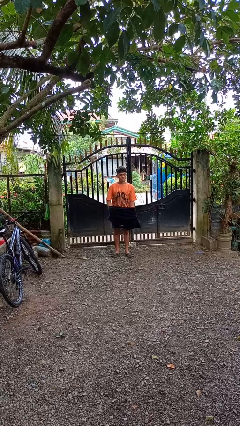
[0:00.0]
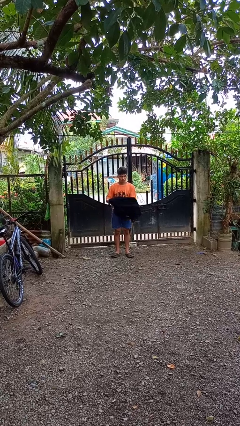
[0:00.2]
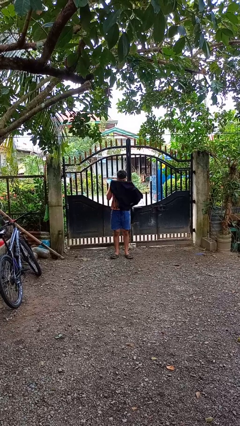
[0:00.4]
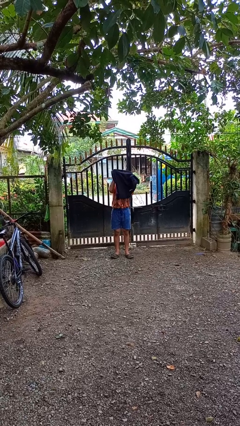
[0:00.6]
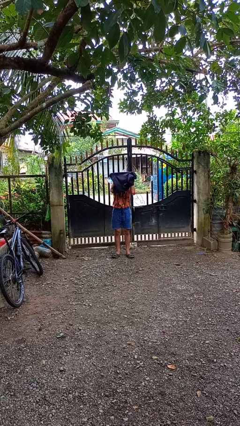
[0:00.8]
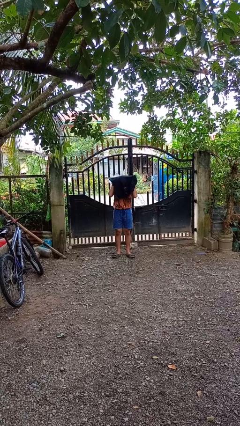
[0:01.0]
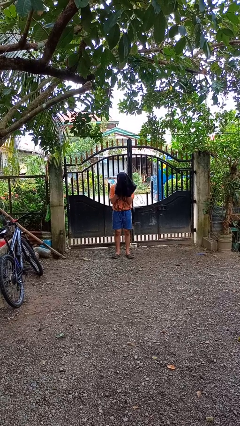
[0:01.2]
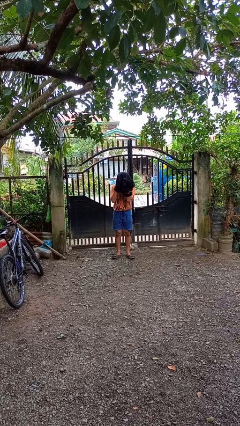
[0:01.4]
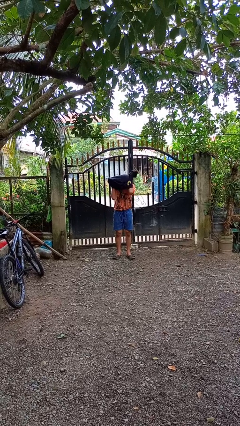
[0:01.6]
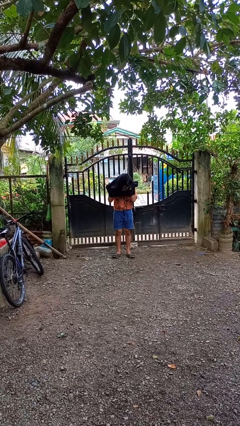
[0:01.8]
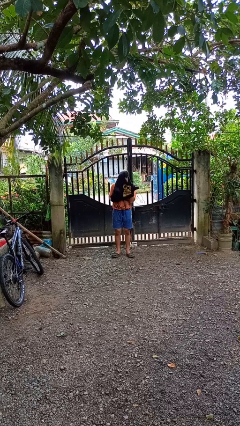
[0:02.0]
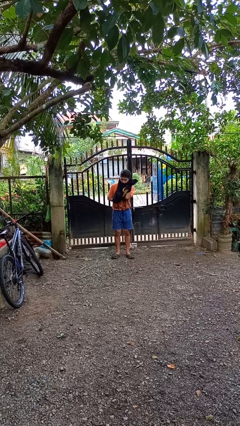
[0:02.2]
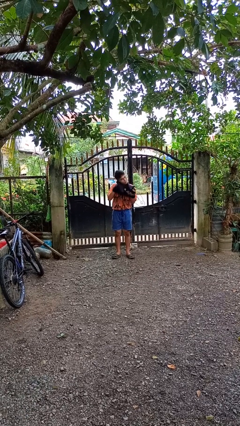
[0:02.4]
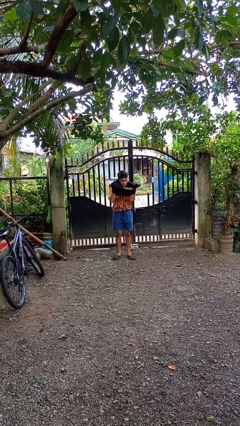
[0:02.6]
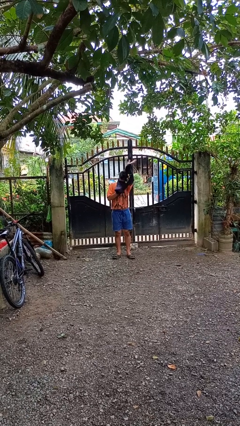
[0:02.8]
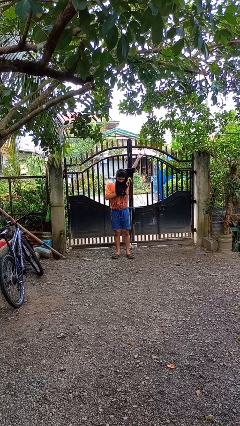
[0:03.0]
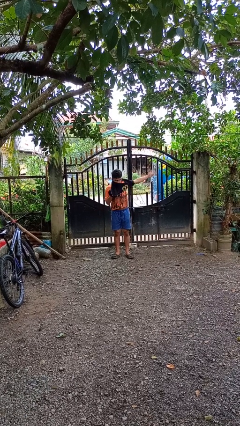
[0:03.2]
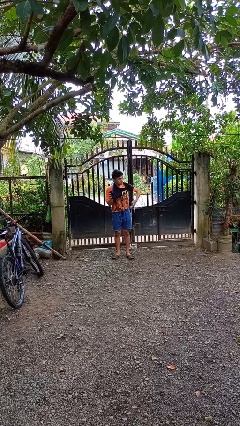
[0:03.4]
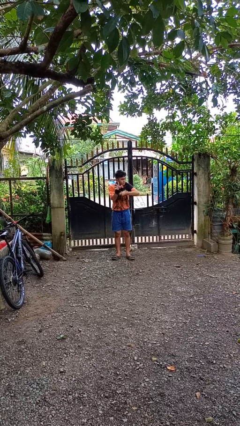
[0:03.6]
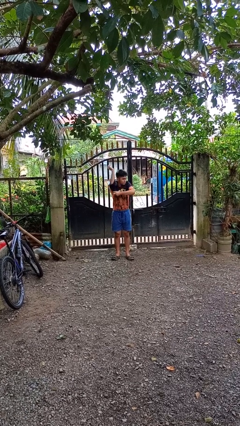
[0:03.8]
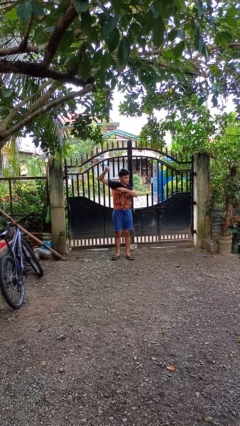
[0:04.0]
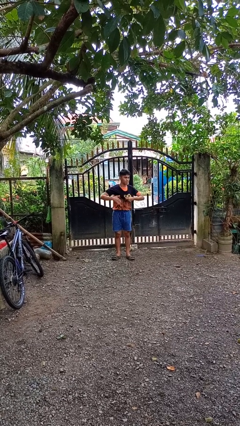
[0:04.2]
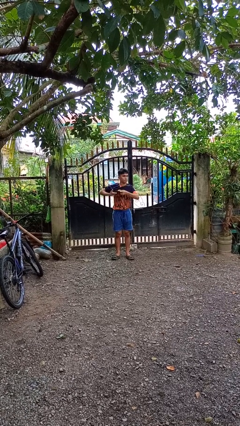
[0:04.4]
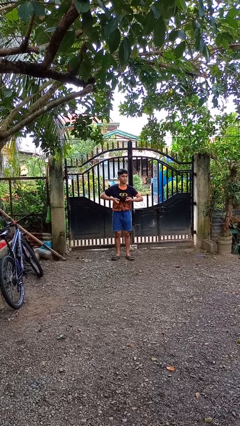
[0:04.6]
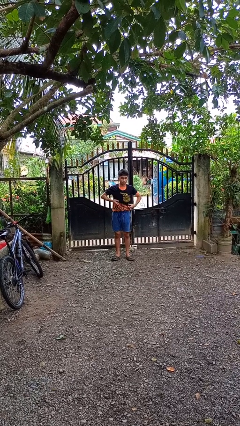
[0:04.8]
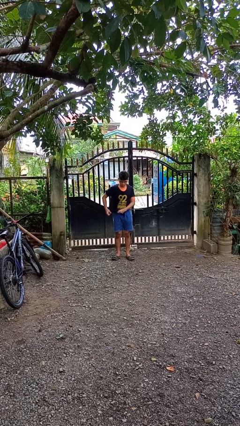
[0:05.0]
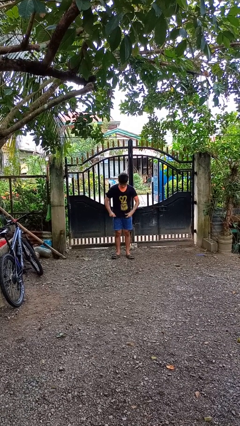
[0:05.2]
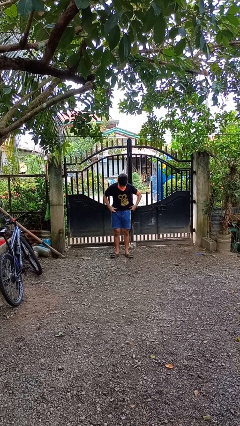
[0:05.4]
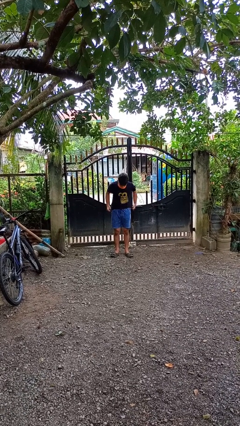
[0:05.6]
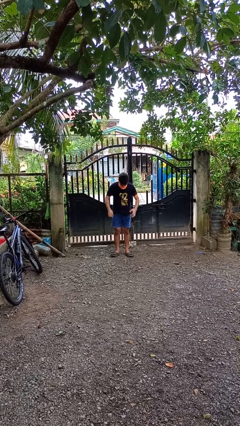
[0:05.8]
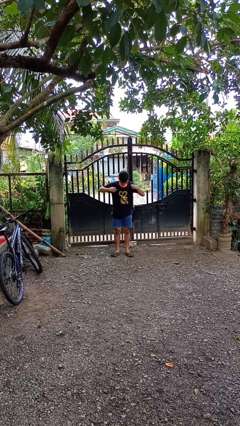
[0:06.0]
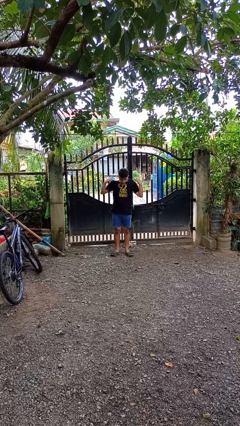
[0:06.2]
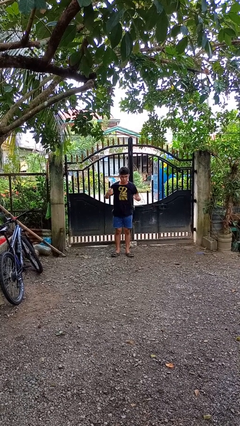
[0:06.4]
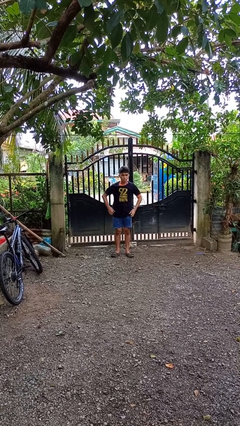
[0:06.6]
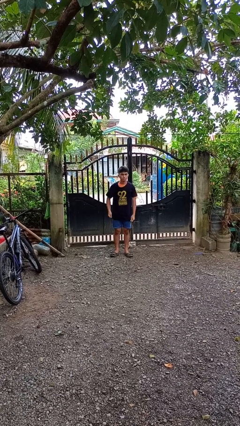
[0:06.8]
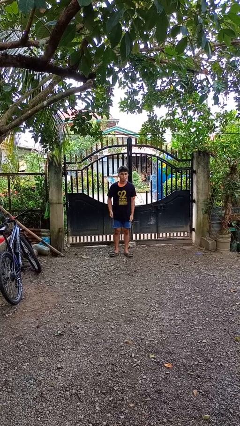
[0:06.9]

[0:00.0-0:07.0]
person puts on shirt

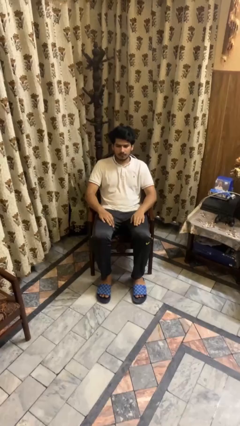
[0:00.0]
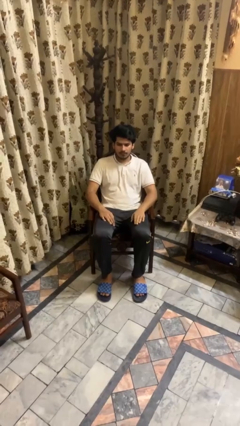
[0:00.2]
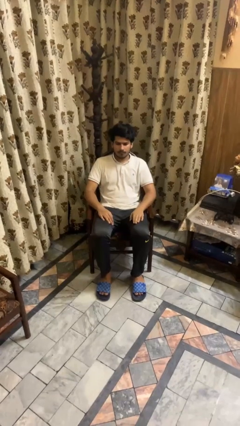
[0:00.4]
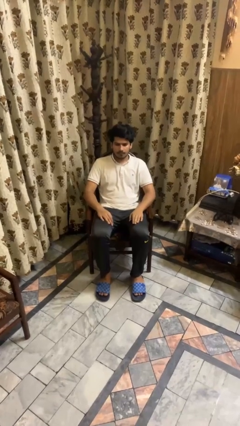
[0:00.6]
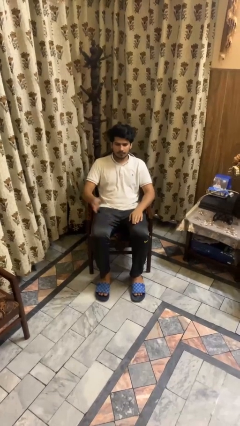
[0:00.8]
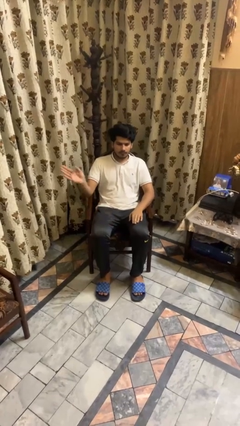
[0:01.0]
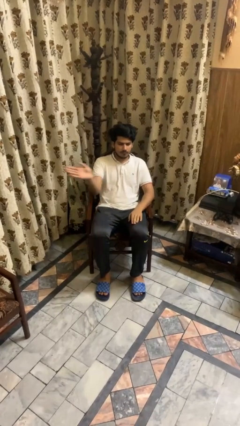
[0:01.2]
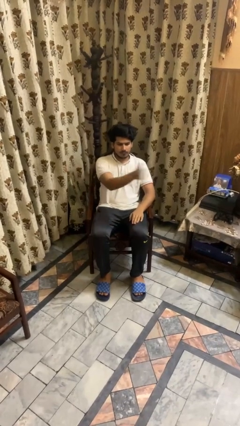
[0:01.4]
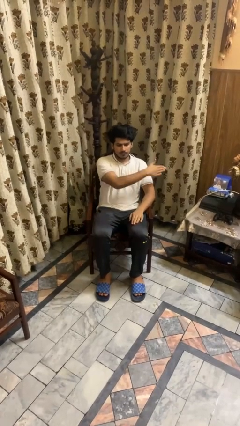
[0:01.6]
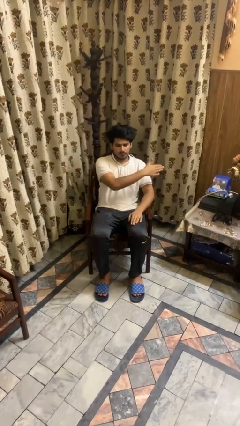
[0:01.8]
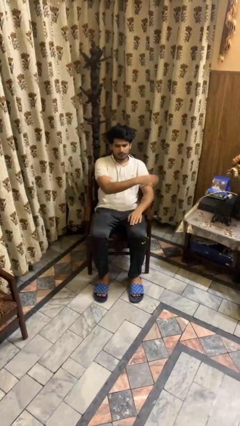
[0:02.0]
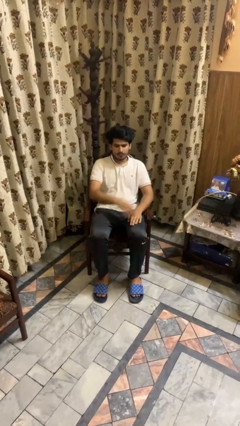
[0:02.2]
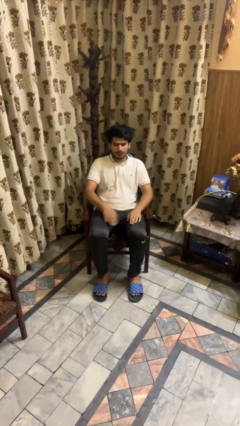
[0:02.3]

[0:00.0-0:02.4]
person gestures swipe left

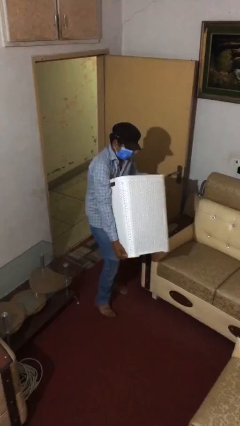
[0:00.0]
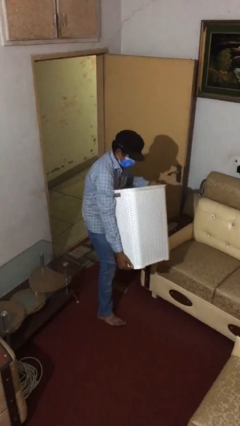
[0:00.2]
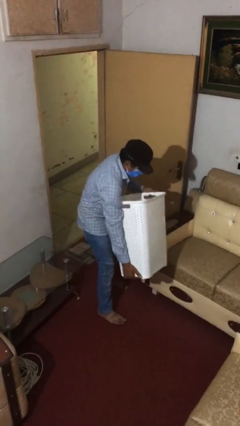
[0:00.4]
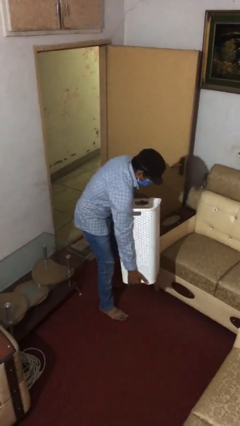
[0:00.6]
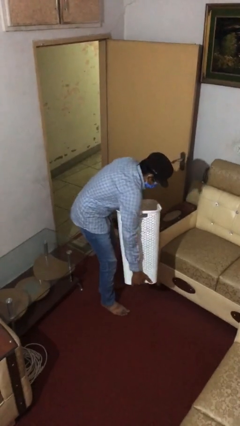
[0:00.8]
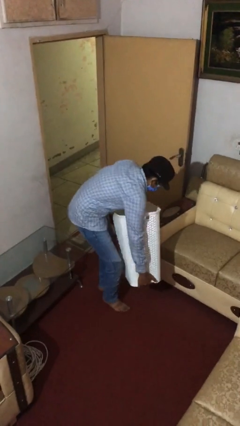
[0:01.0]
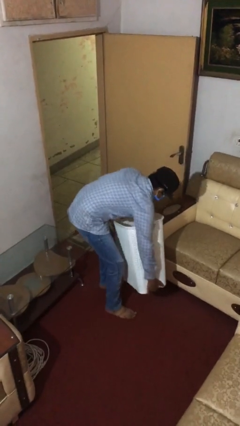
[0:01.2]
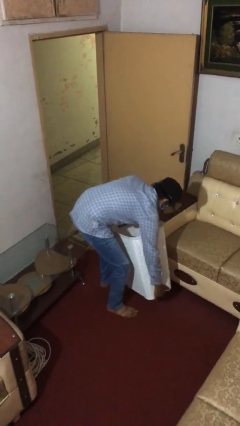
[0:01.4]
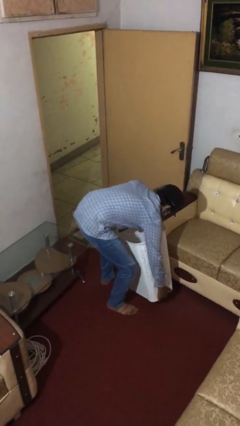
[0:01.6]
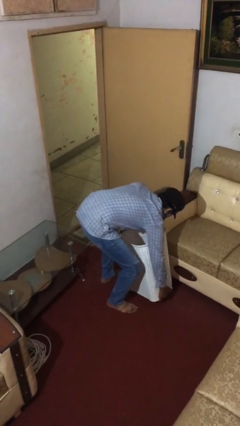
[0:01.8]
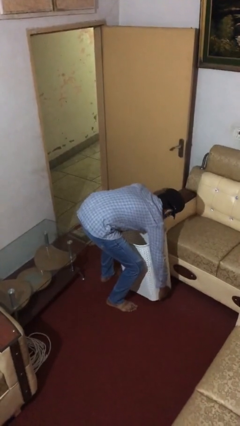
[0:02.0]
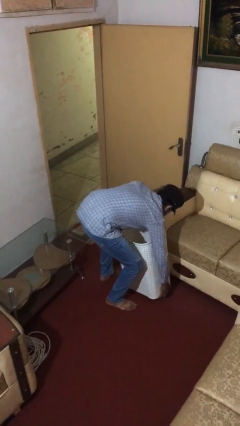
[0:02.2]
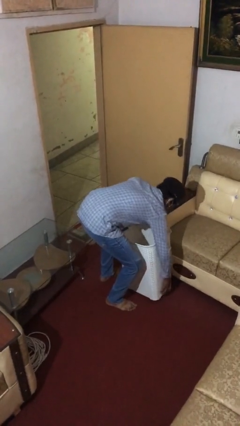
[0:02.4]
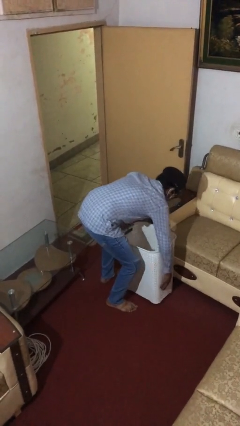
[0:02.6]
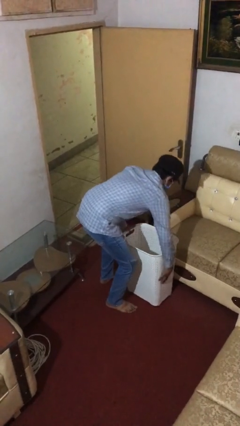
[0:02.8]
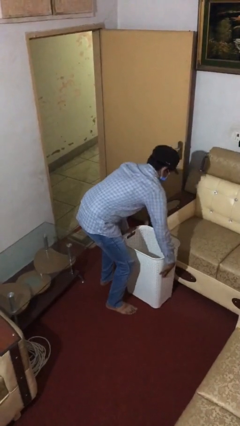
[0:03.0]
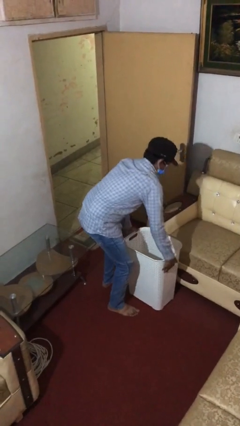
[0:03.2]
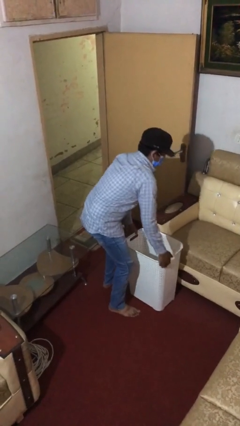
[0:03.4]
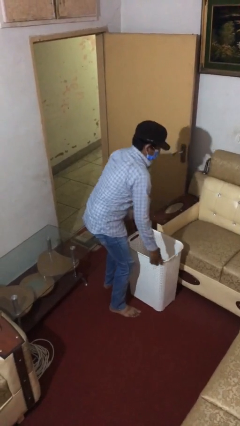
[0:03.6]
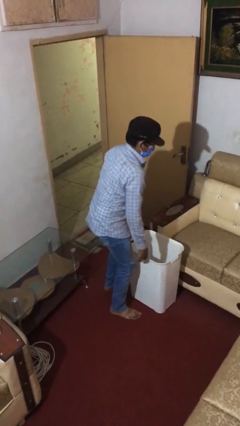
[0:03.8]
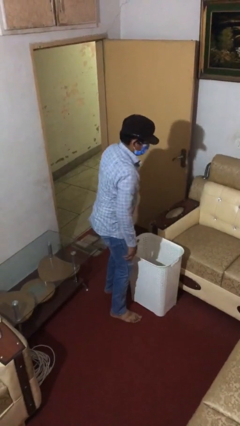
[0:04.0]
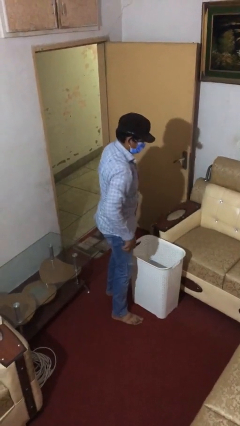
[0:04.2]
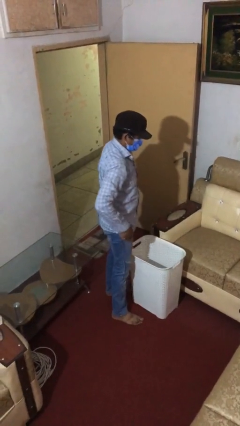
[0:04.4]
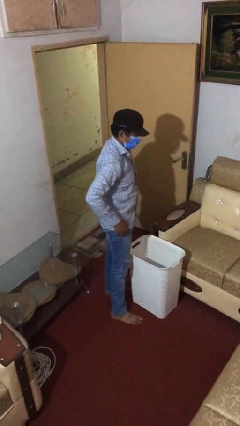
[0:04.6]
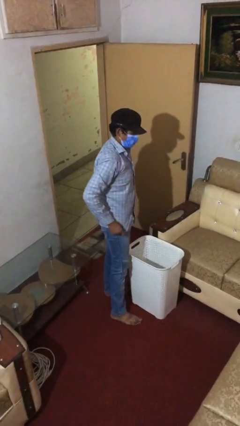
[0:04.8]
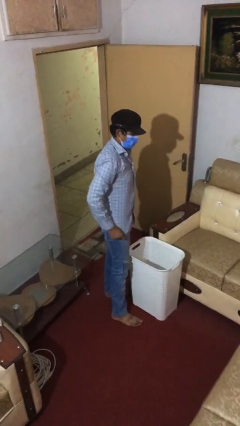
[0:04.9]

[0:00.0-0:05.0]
person puts down object on floor

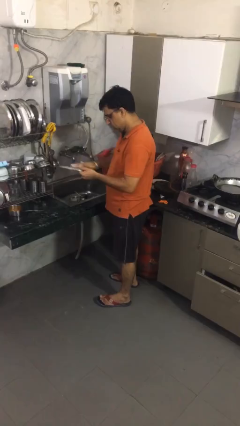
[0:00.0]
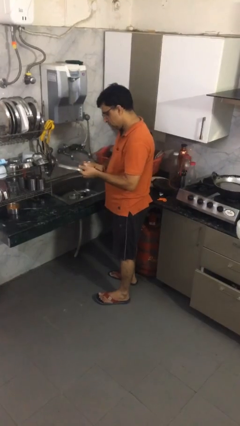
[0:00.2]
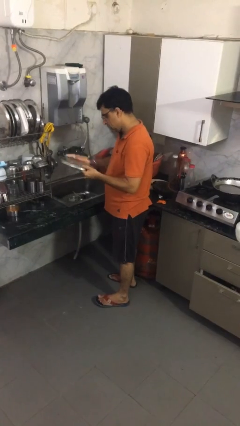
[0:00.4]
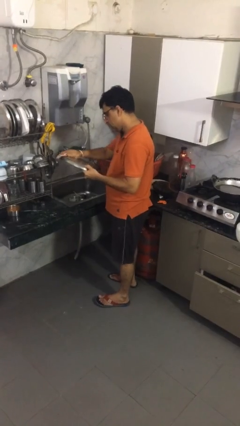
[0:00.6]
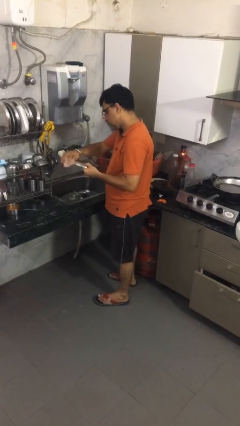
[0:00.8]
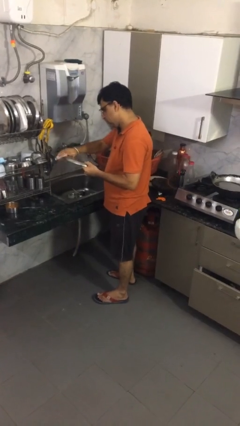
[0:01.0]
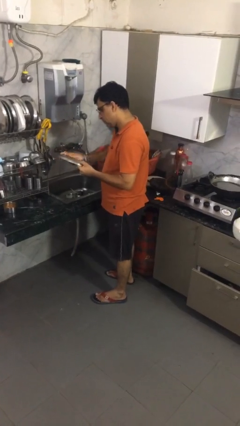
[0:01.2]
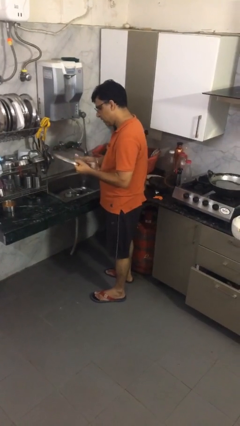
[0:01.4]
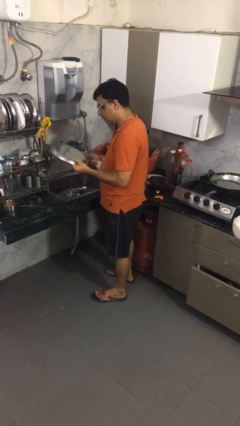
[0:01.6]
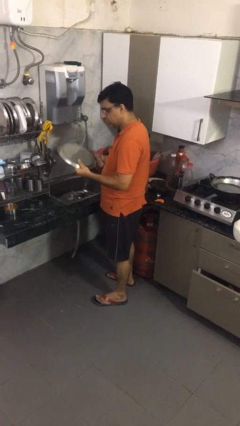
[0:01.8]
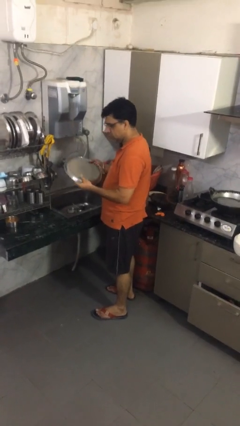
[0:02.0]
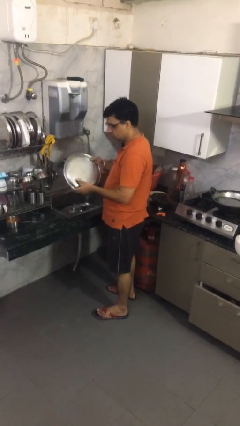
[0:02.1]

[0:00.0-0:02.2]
person dries dish

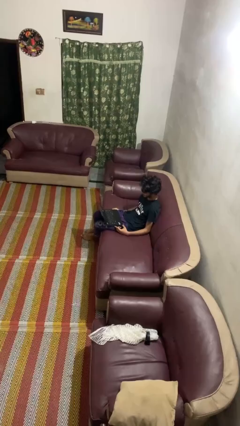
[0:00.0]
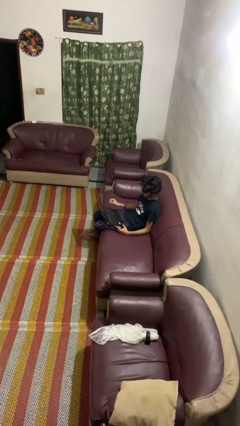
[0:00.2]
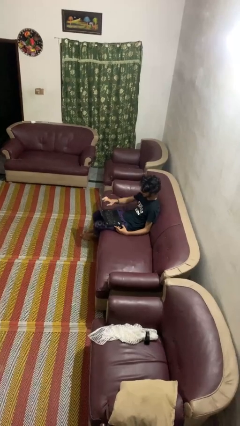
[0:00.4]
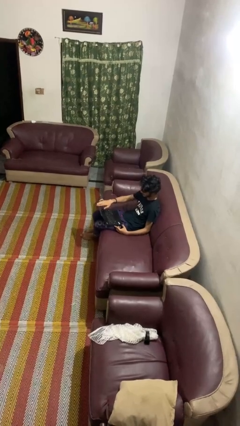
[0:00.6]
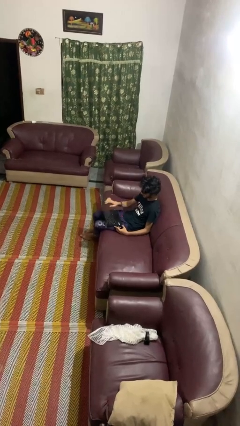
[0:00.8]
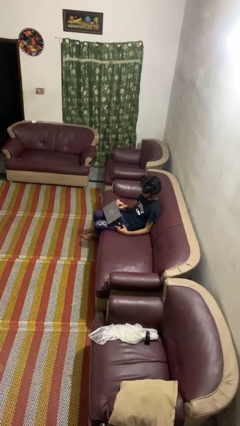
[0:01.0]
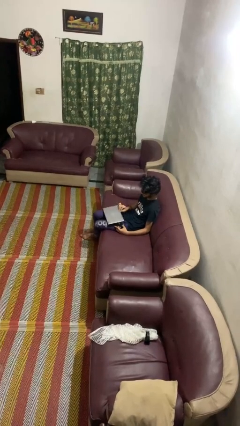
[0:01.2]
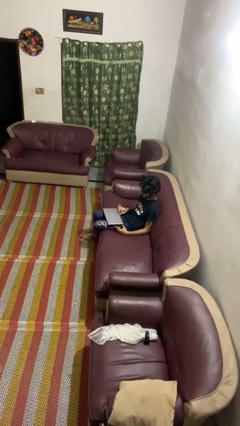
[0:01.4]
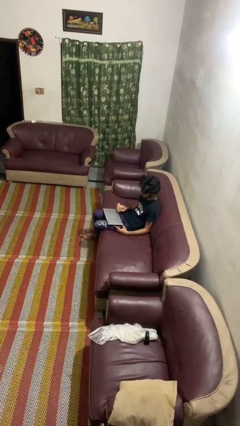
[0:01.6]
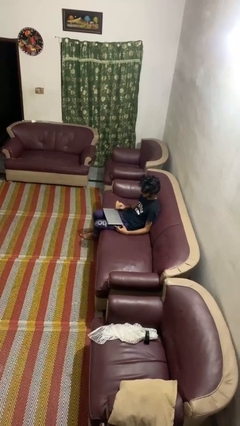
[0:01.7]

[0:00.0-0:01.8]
person closes laptop
